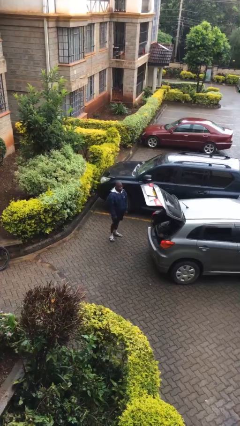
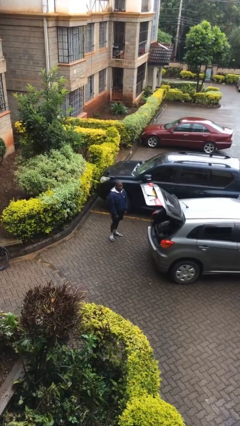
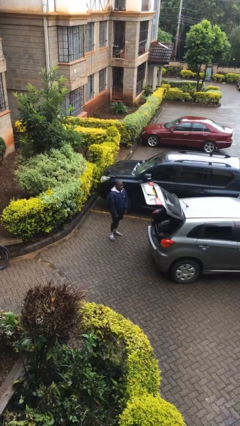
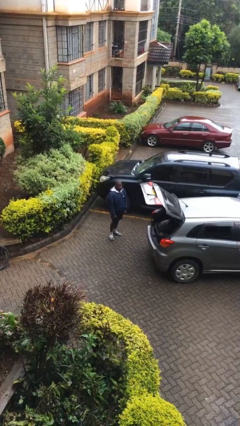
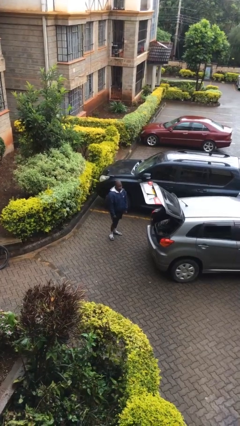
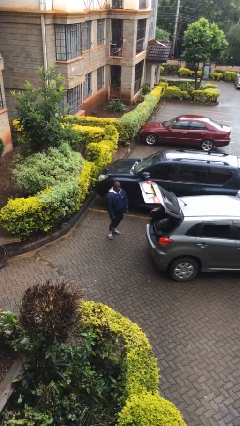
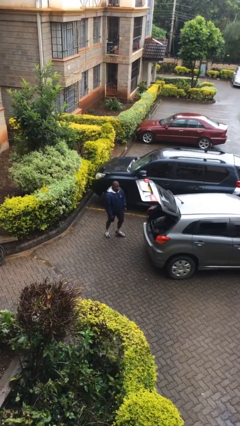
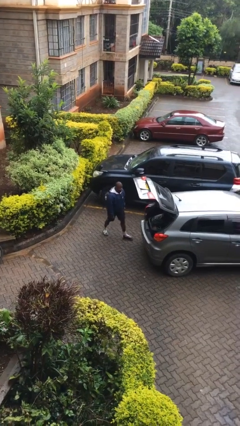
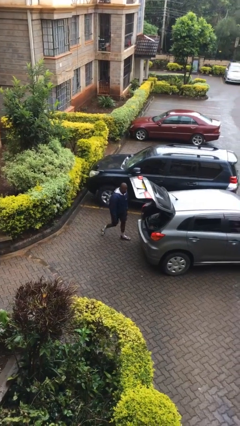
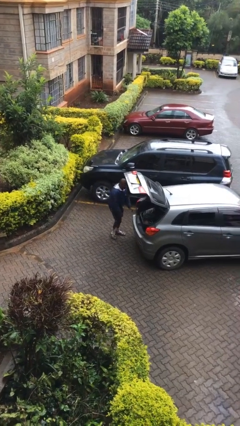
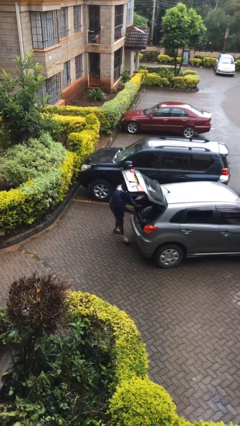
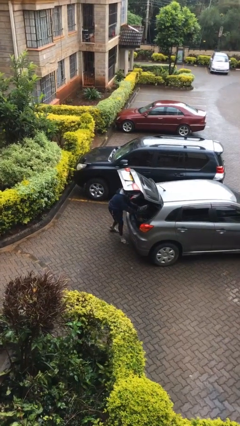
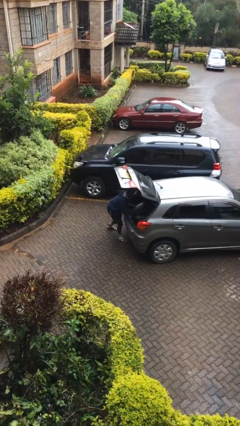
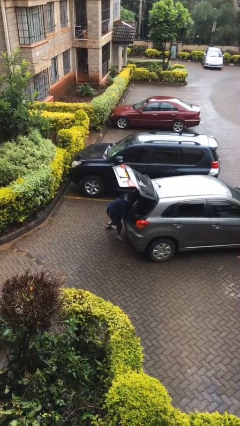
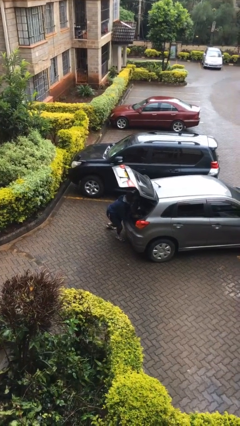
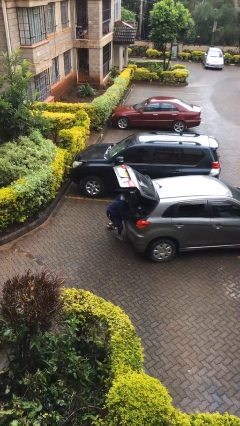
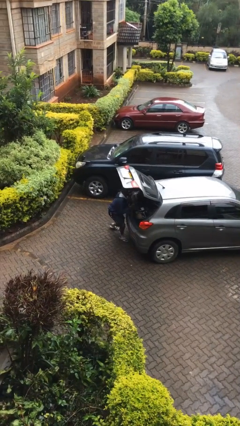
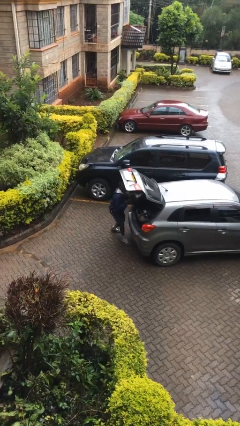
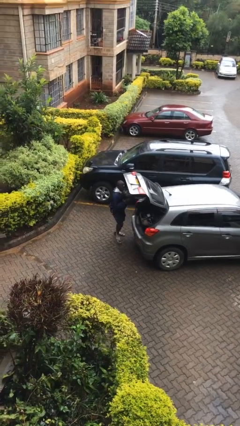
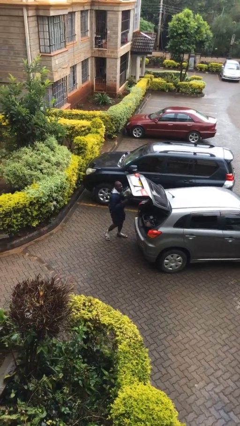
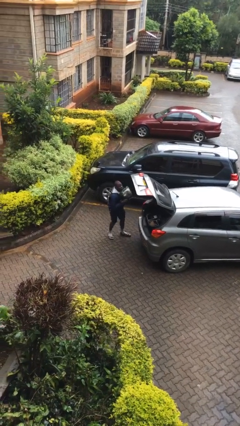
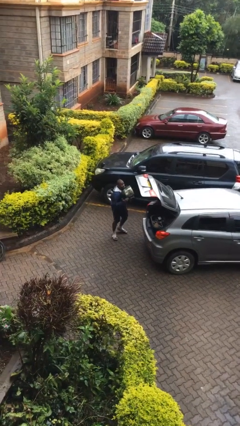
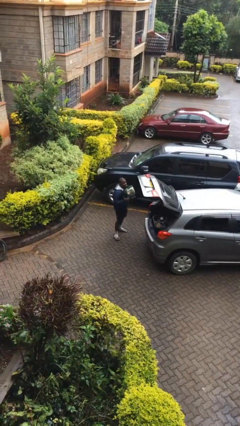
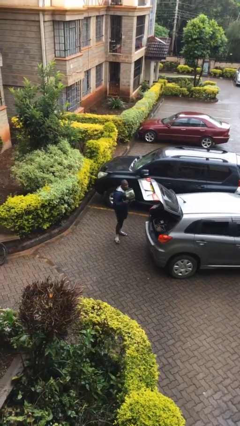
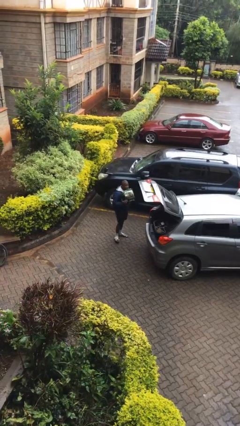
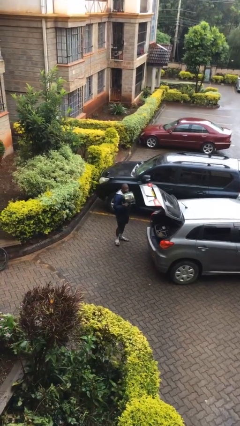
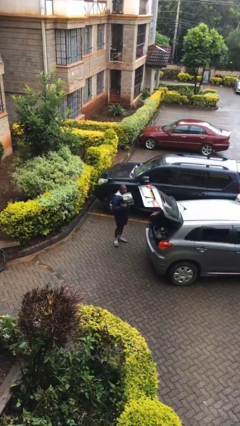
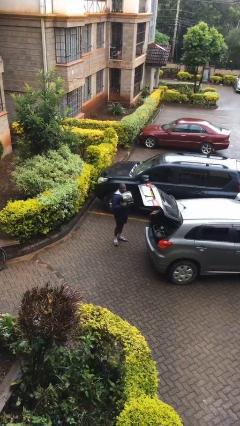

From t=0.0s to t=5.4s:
person unloads car

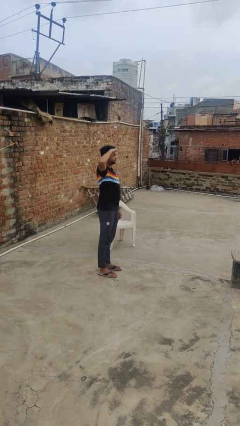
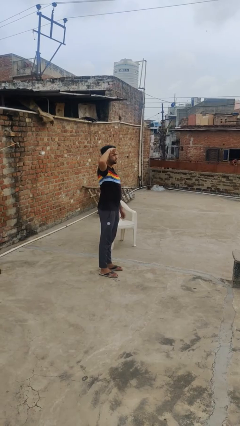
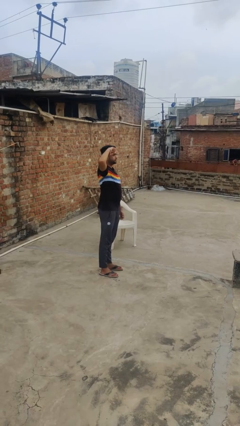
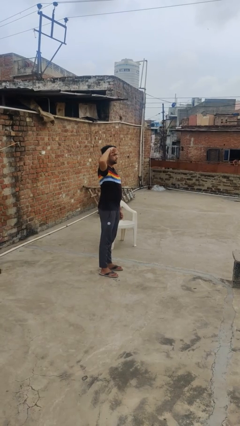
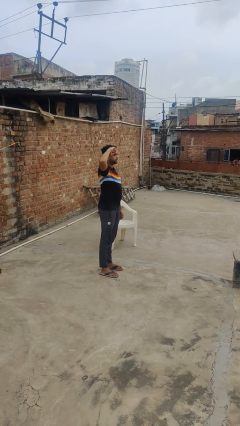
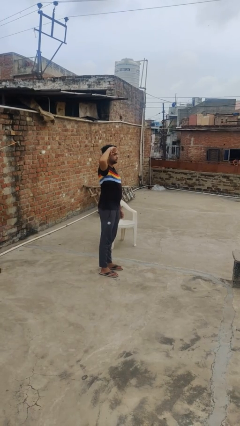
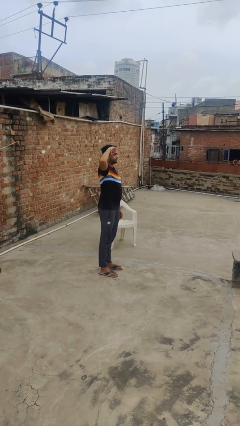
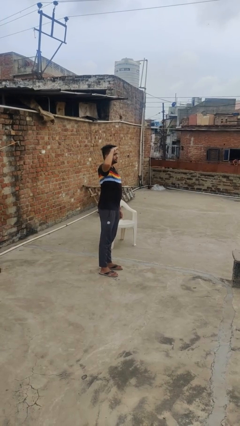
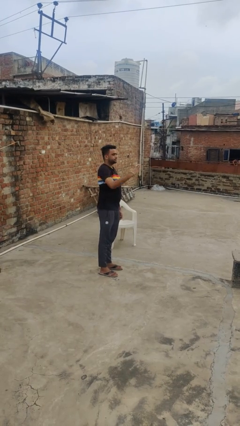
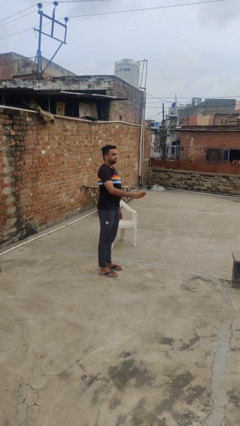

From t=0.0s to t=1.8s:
person salutes

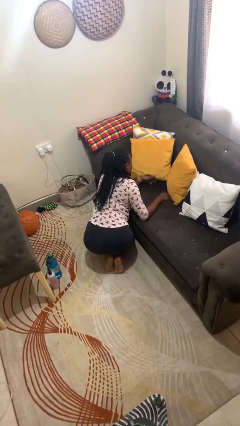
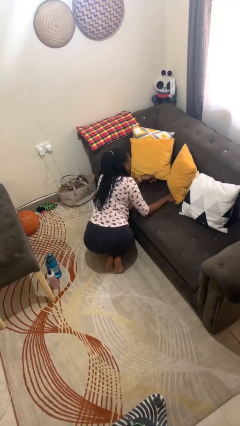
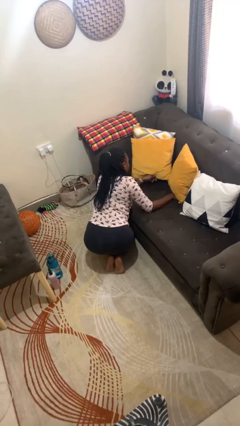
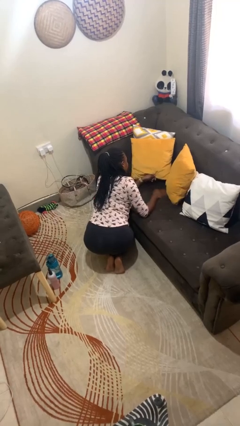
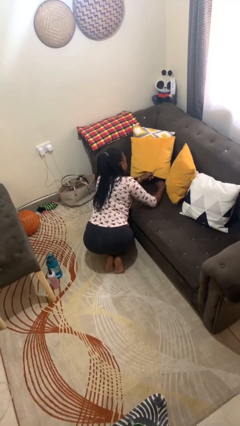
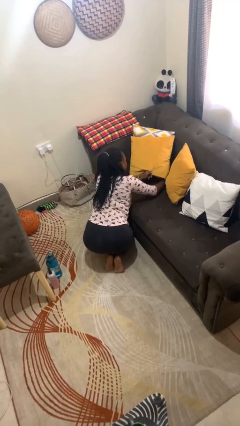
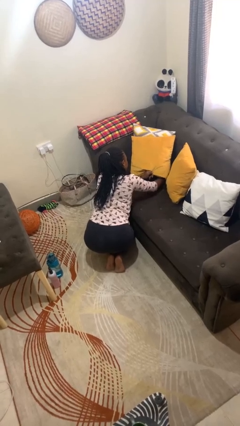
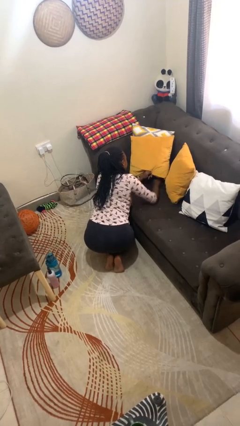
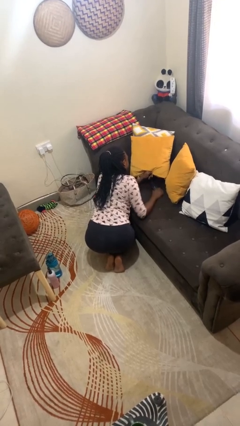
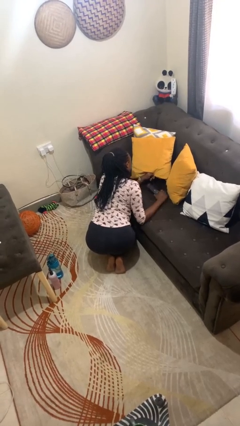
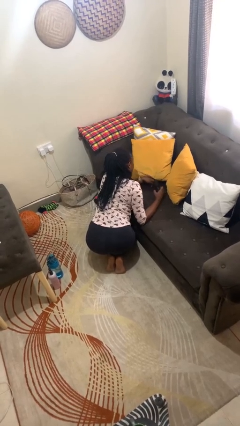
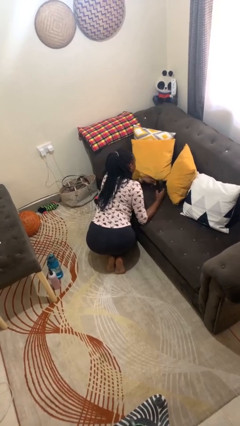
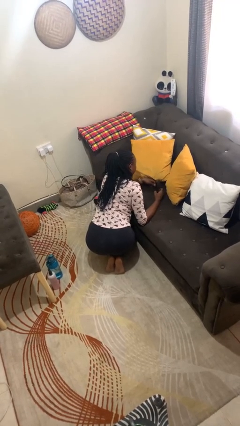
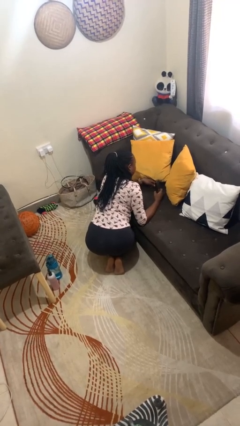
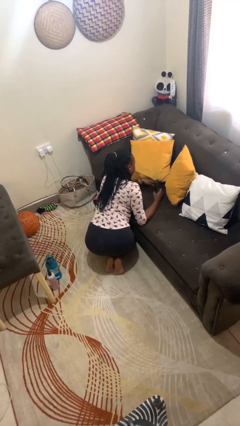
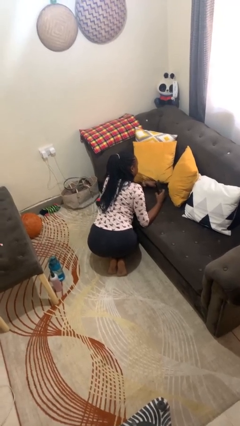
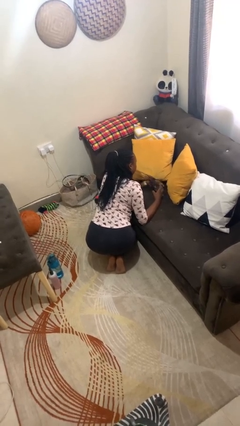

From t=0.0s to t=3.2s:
person searches in couch

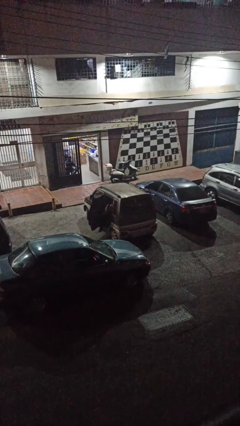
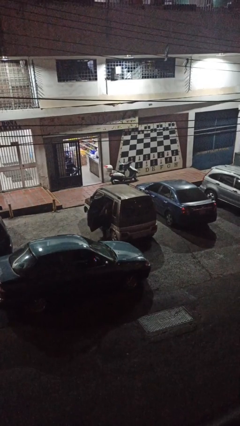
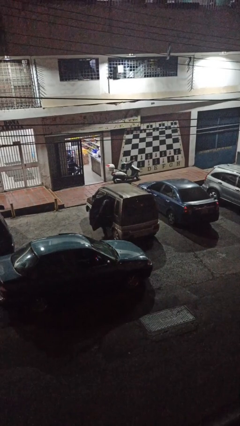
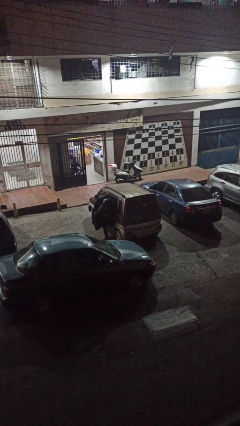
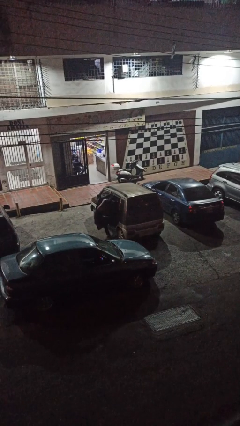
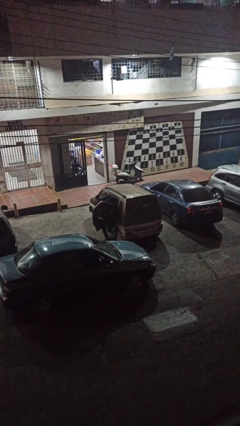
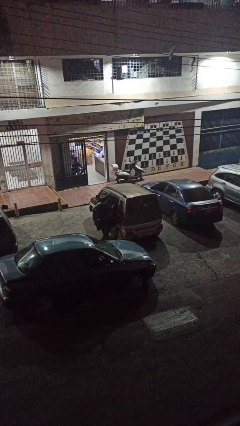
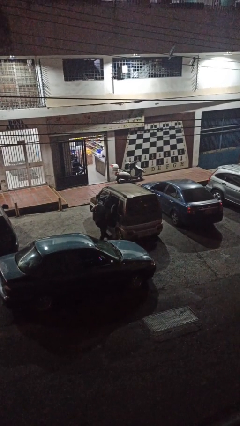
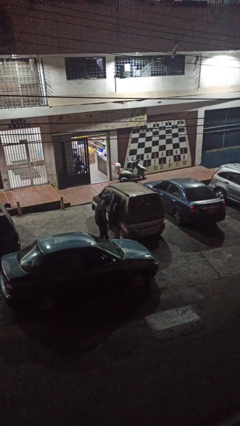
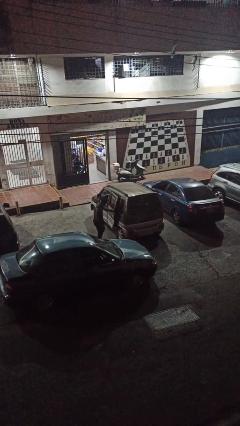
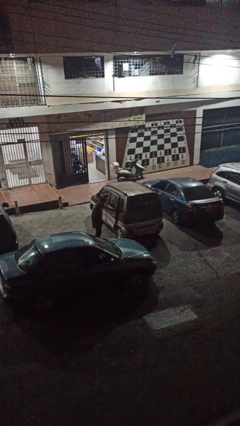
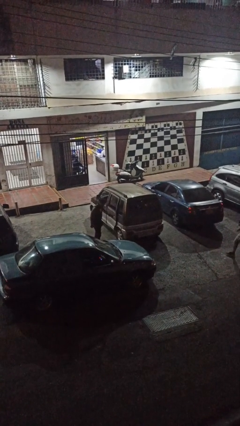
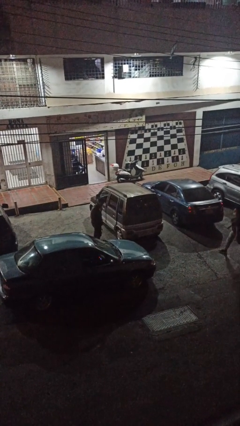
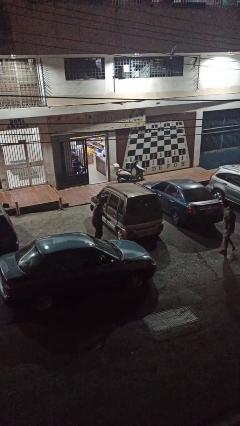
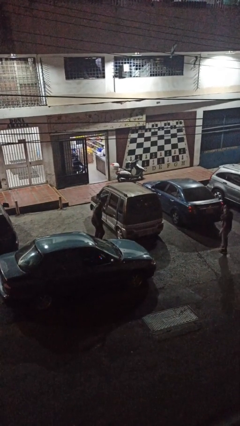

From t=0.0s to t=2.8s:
car drops off person

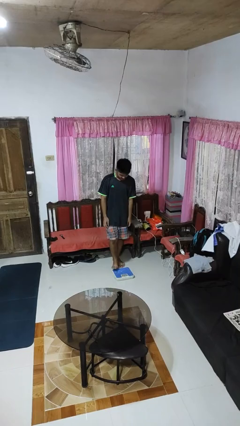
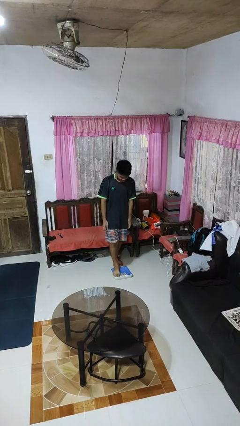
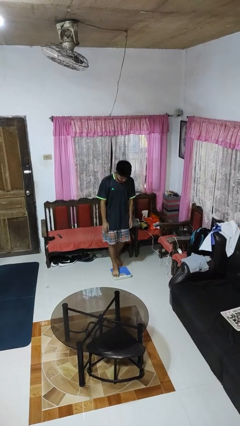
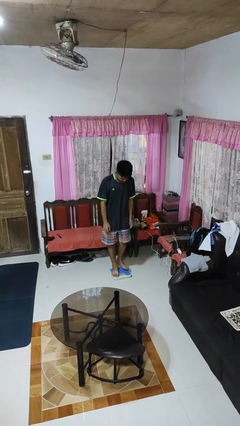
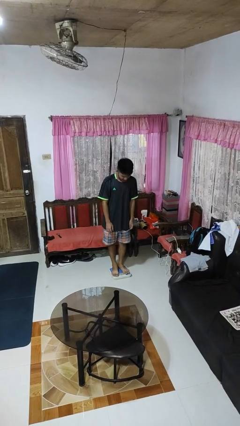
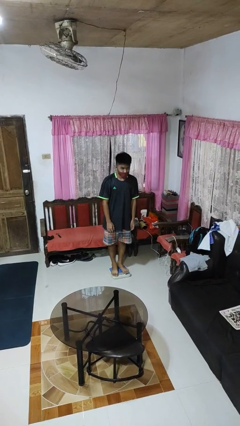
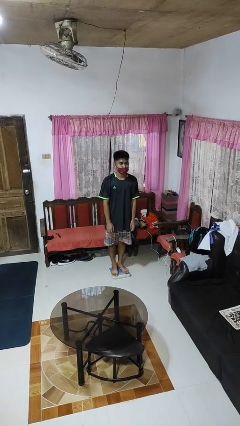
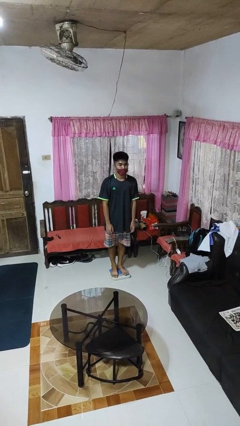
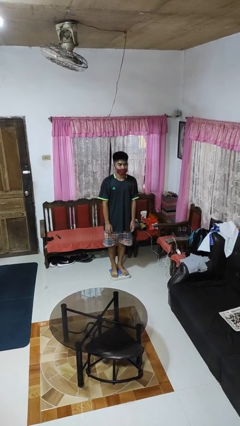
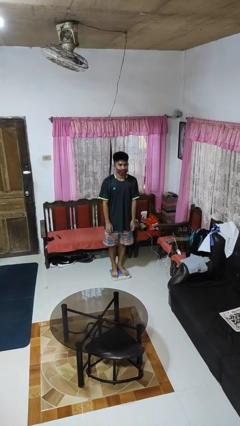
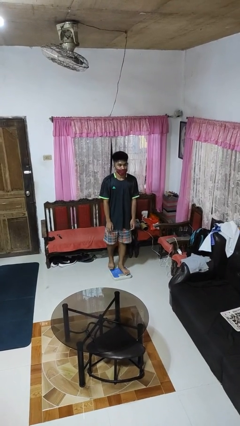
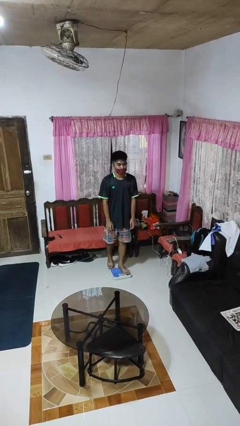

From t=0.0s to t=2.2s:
person uses bodyweight scale

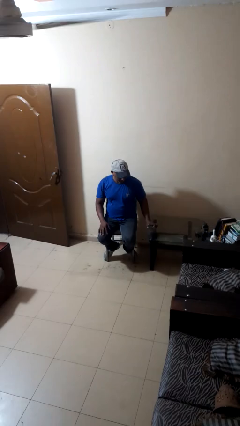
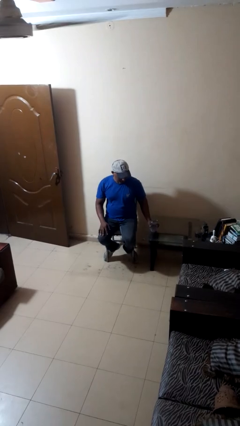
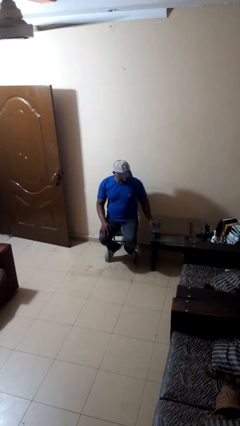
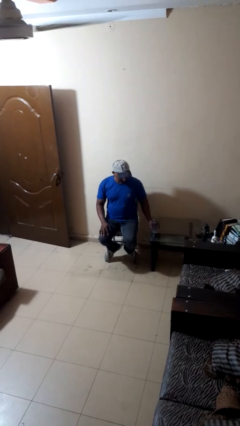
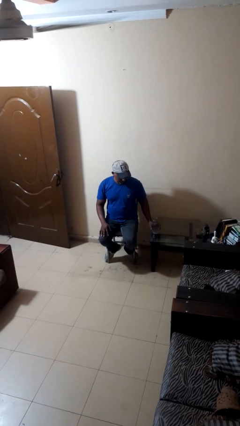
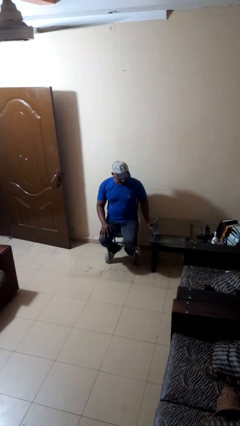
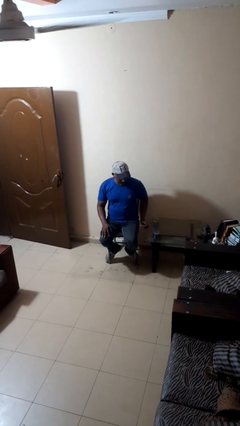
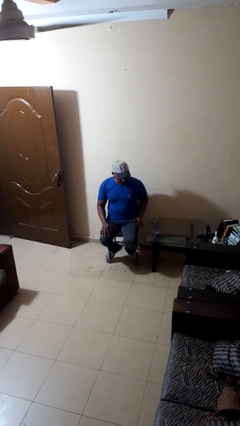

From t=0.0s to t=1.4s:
person sets upright glass

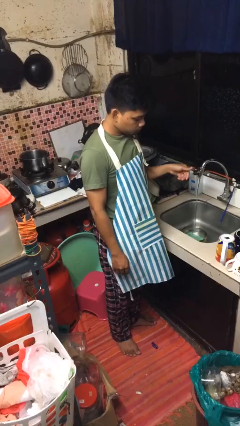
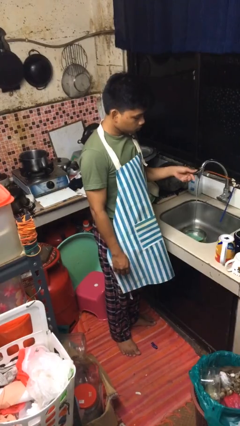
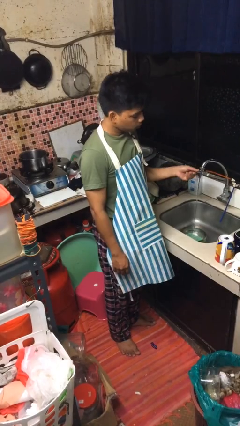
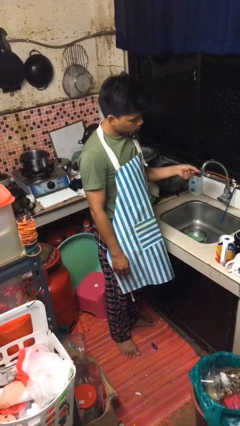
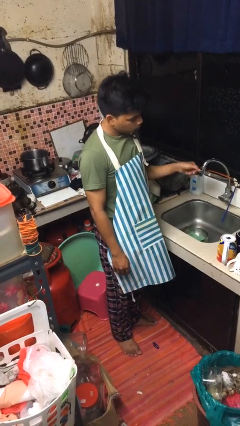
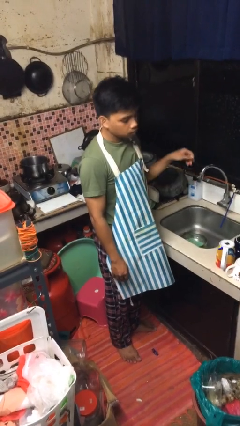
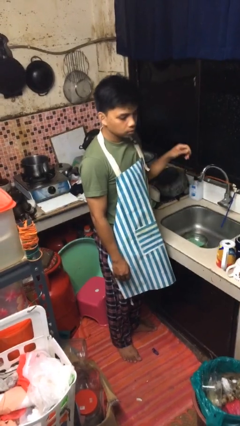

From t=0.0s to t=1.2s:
person turns off faucet
